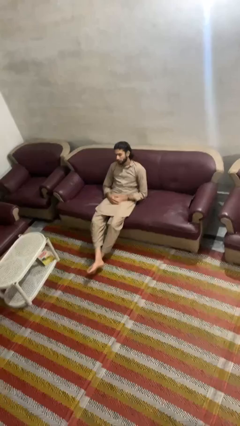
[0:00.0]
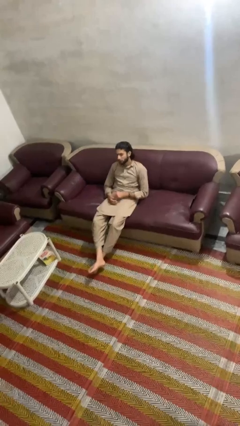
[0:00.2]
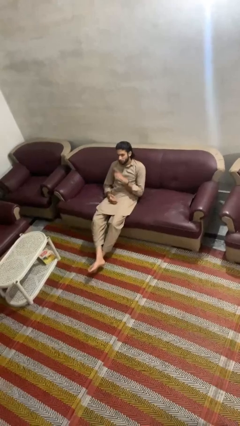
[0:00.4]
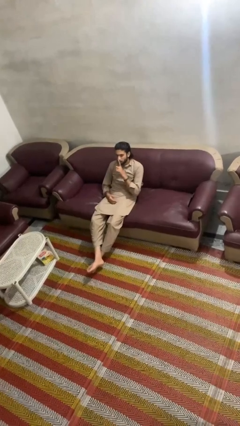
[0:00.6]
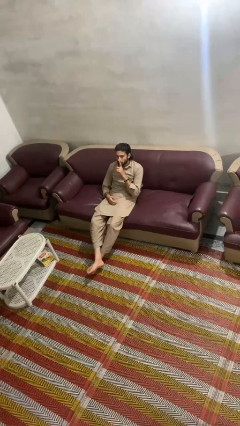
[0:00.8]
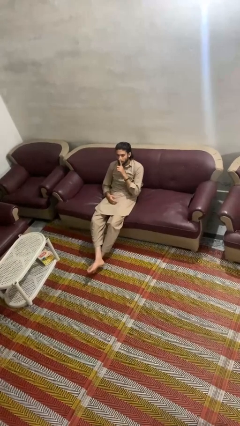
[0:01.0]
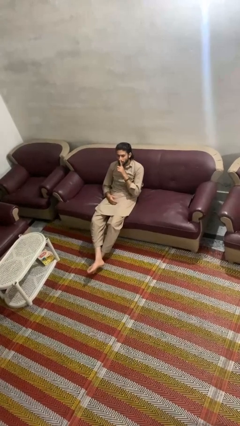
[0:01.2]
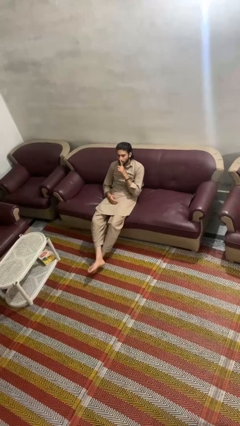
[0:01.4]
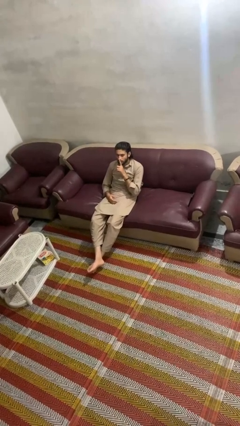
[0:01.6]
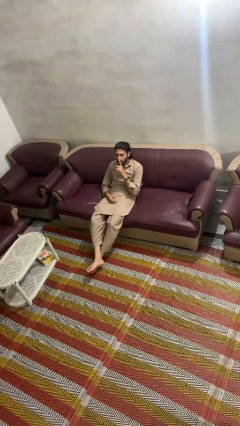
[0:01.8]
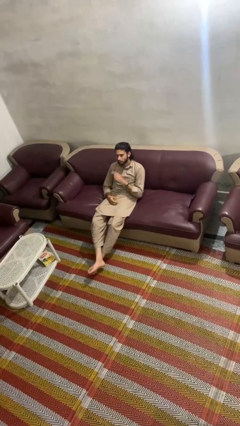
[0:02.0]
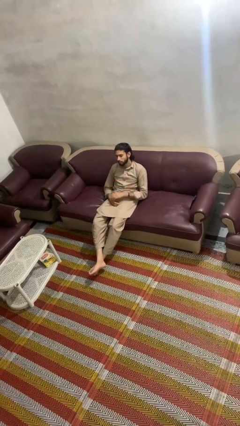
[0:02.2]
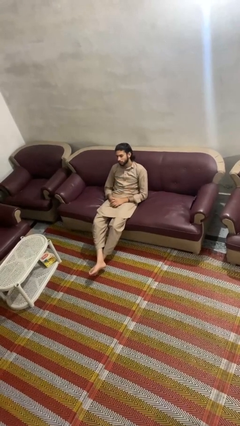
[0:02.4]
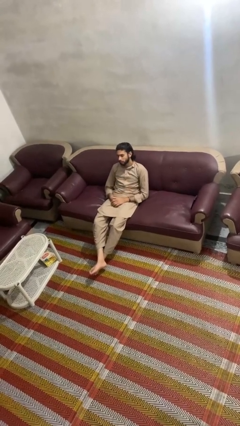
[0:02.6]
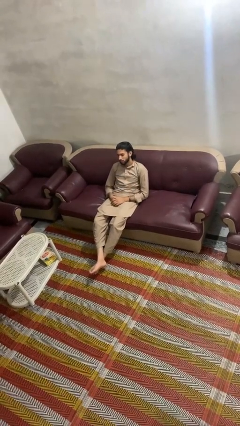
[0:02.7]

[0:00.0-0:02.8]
person gestures be quiet

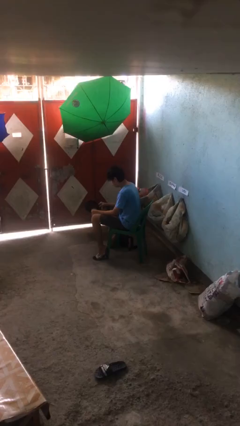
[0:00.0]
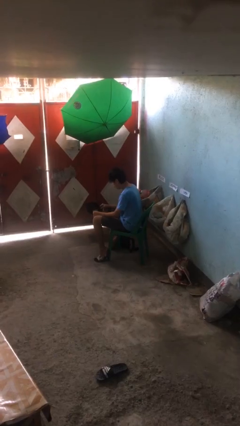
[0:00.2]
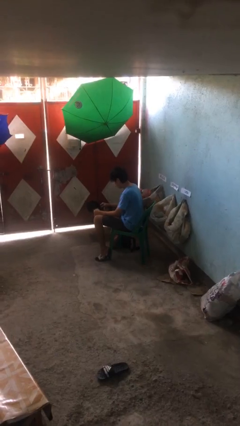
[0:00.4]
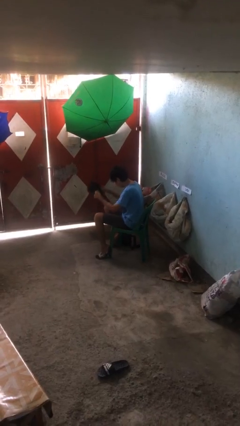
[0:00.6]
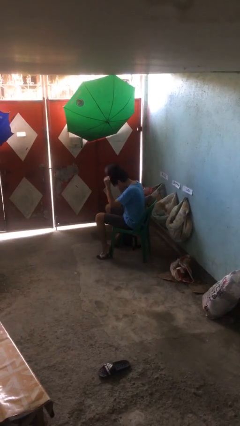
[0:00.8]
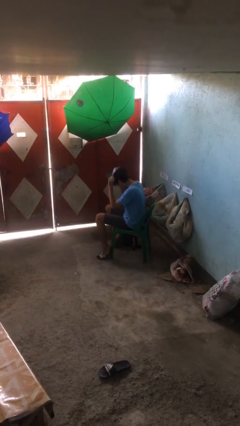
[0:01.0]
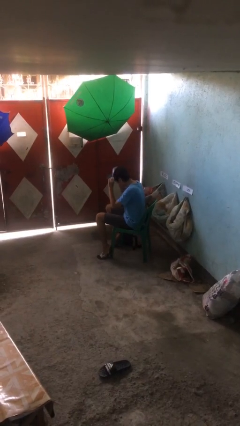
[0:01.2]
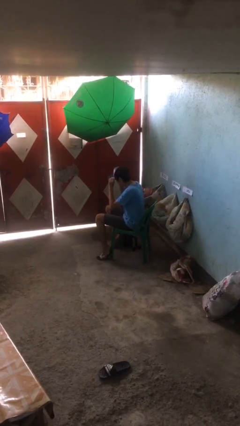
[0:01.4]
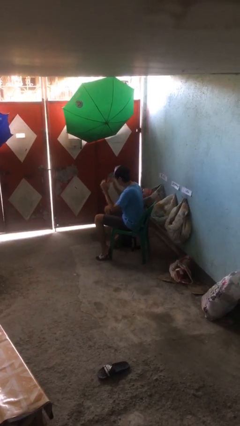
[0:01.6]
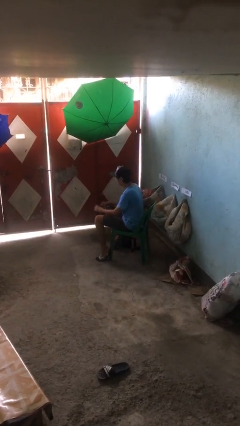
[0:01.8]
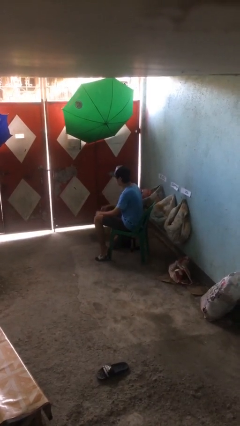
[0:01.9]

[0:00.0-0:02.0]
person puts on hat

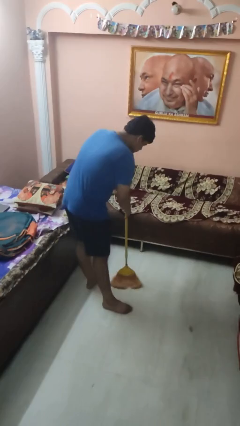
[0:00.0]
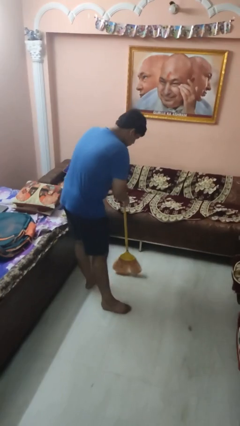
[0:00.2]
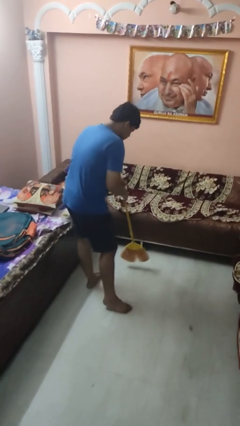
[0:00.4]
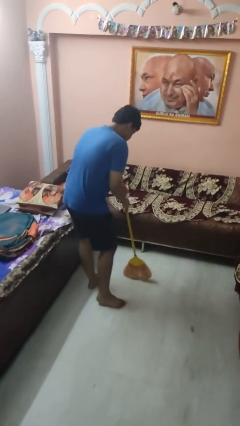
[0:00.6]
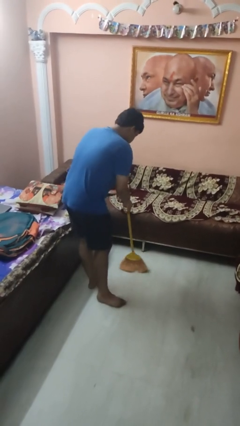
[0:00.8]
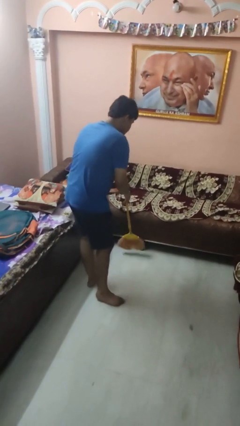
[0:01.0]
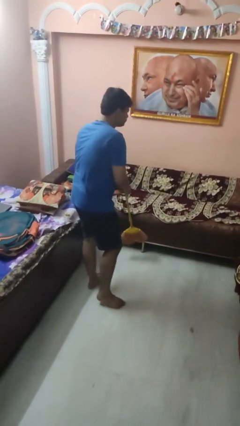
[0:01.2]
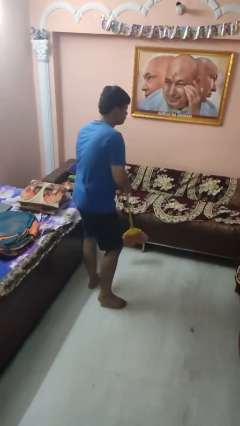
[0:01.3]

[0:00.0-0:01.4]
person sweeps floor

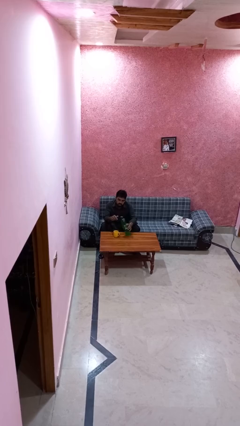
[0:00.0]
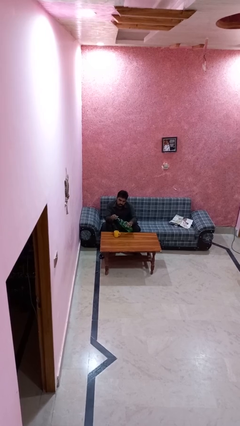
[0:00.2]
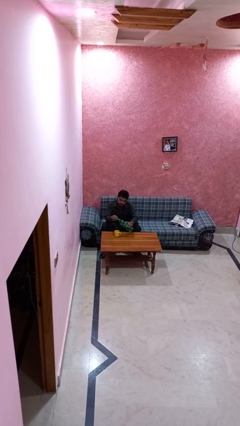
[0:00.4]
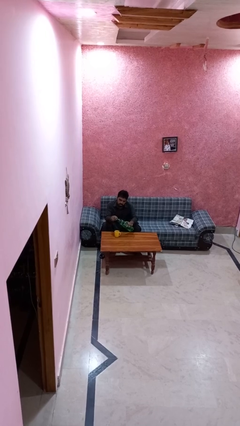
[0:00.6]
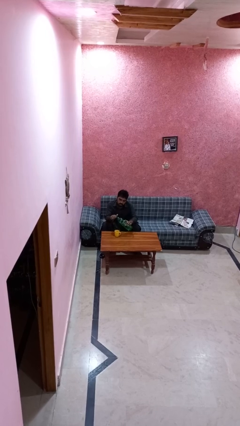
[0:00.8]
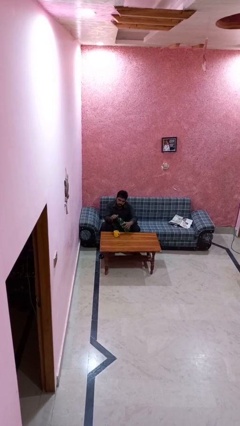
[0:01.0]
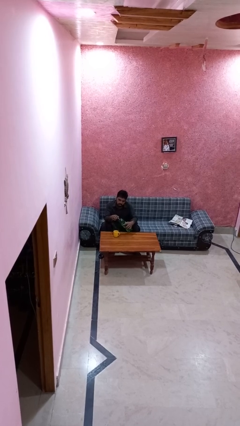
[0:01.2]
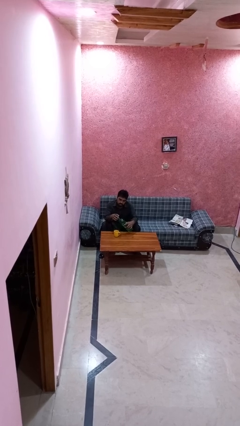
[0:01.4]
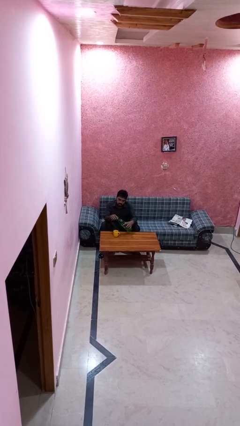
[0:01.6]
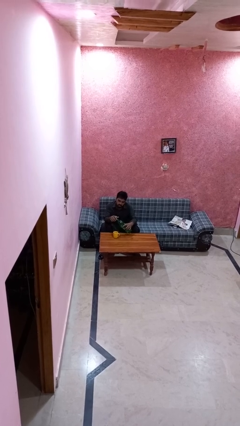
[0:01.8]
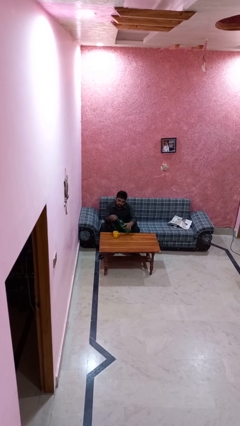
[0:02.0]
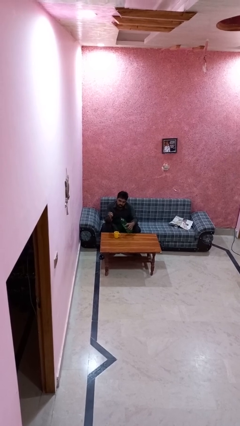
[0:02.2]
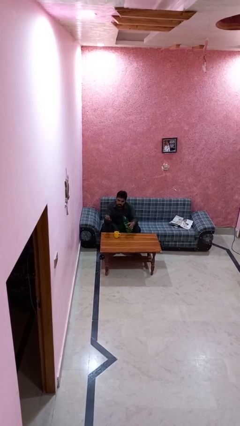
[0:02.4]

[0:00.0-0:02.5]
person unscrews lid from bottle

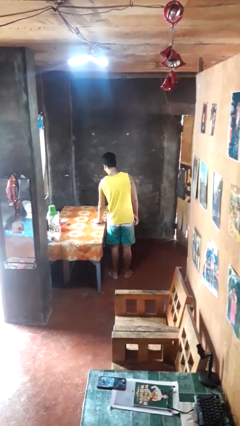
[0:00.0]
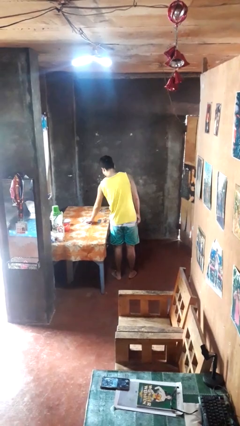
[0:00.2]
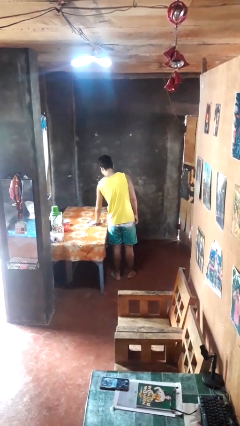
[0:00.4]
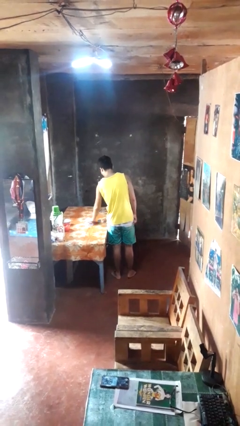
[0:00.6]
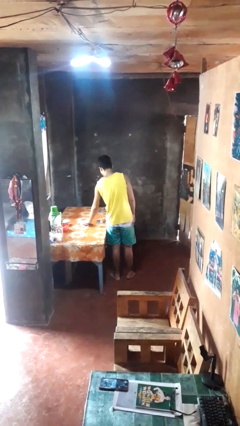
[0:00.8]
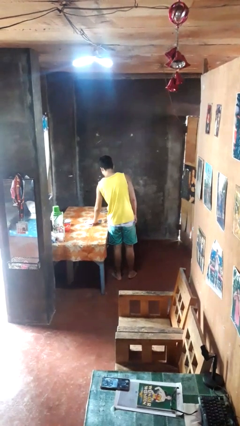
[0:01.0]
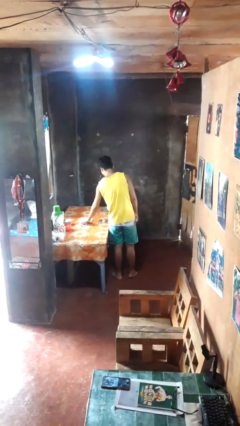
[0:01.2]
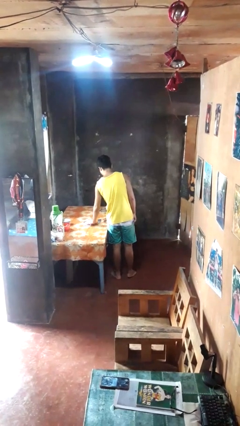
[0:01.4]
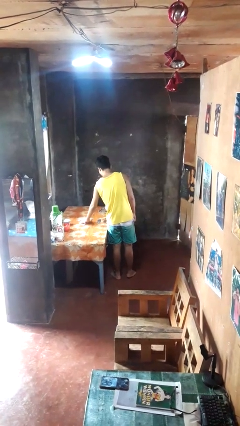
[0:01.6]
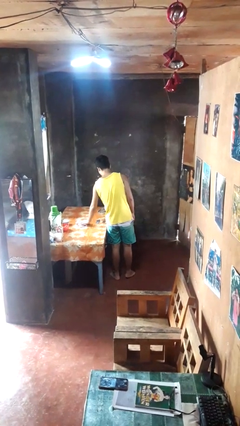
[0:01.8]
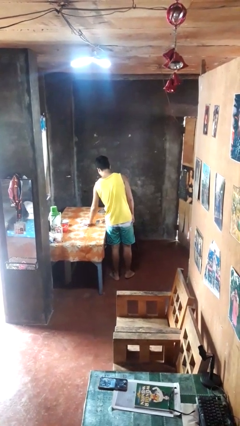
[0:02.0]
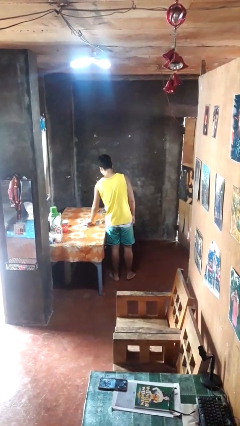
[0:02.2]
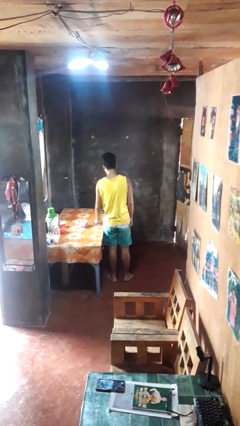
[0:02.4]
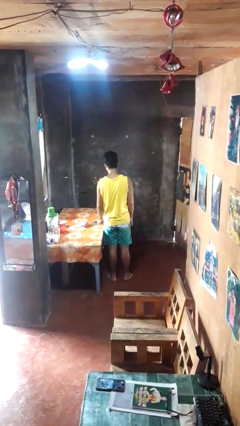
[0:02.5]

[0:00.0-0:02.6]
person cleans table with rag

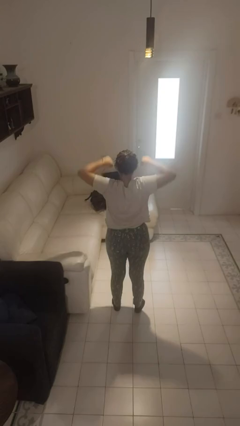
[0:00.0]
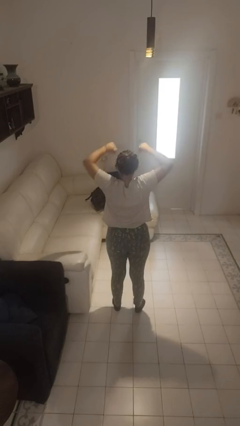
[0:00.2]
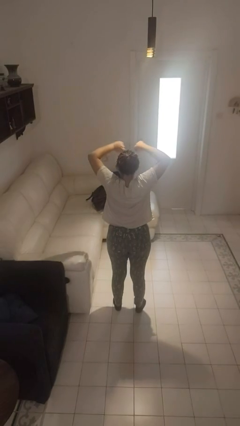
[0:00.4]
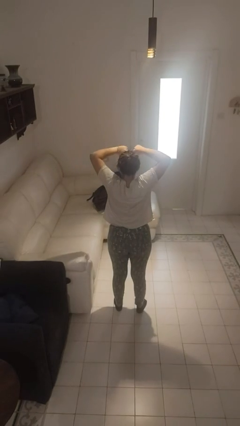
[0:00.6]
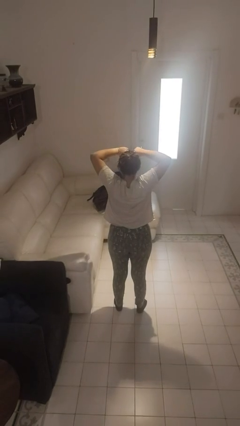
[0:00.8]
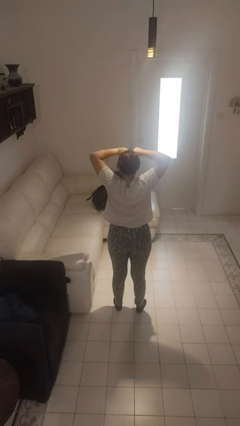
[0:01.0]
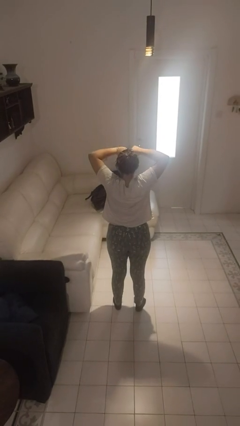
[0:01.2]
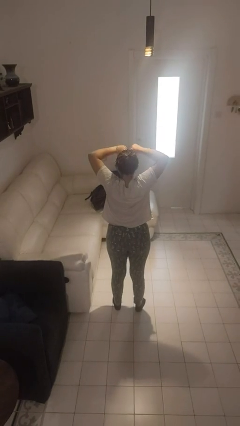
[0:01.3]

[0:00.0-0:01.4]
person stretches arms to side

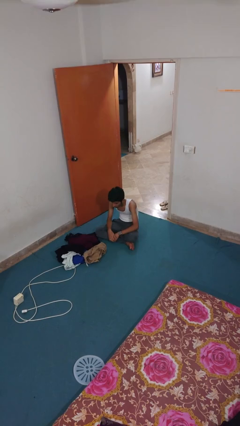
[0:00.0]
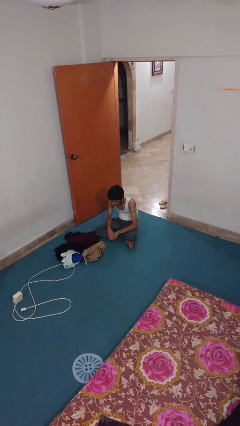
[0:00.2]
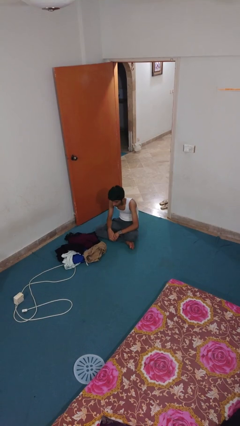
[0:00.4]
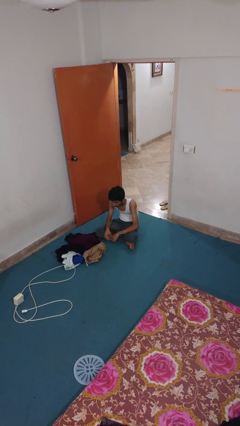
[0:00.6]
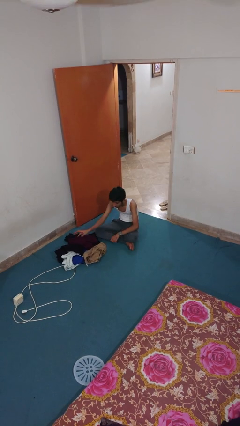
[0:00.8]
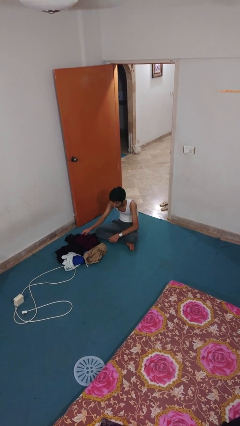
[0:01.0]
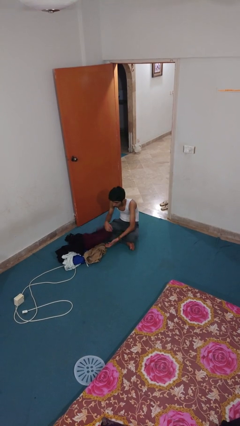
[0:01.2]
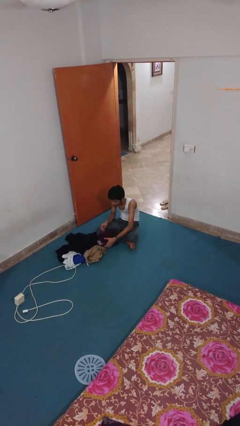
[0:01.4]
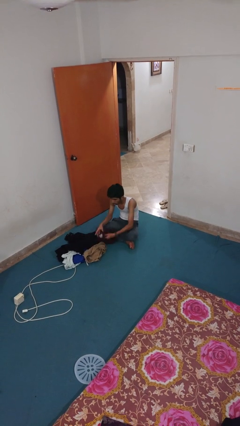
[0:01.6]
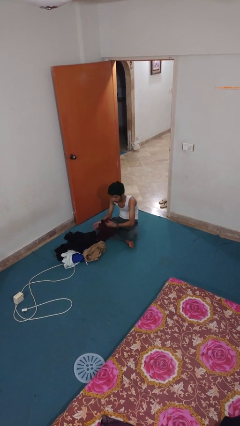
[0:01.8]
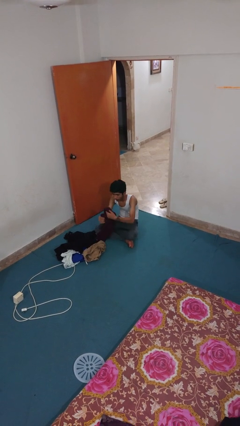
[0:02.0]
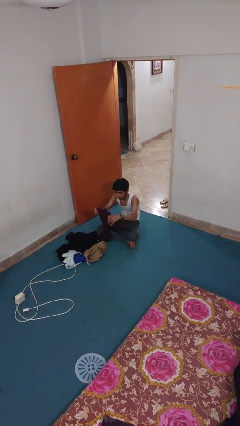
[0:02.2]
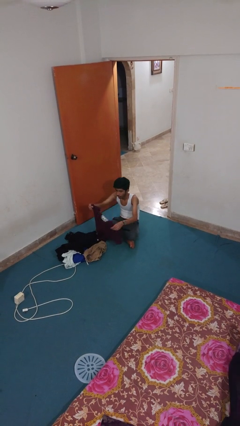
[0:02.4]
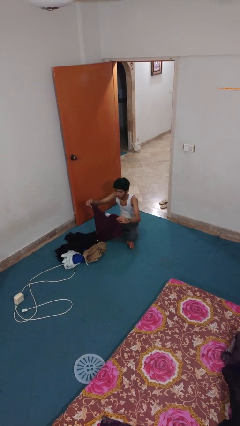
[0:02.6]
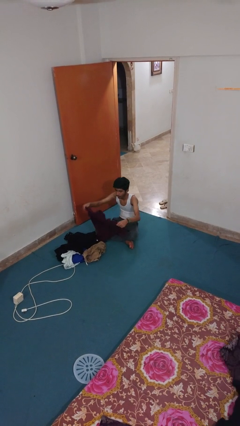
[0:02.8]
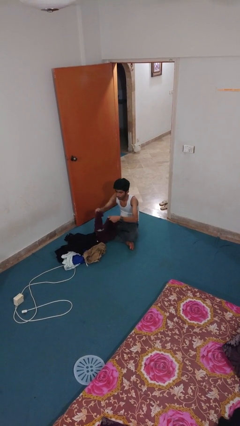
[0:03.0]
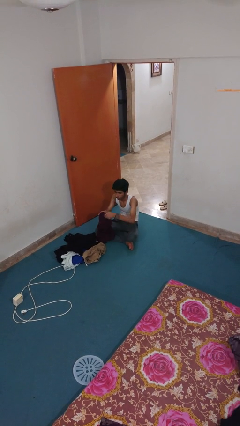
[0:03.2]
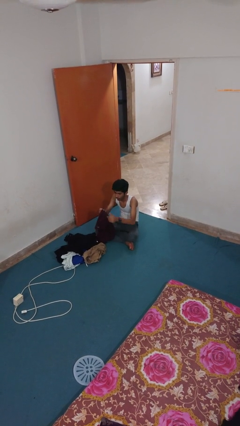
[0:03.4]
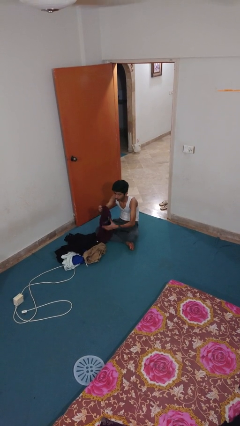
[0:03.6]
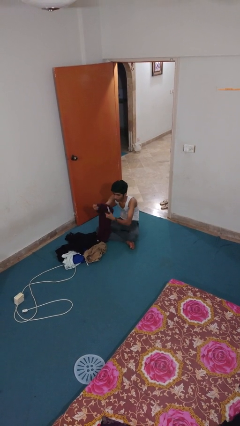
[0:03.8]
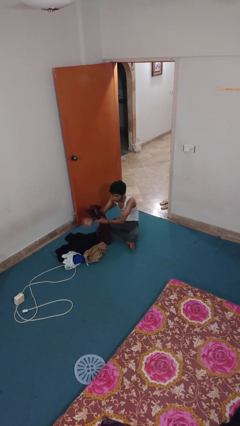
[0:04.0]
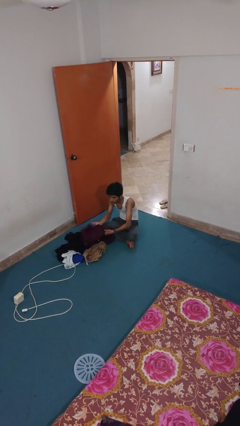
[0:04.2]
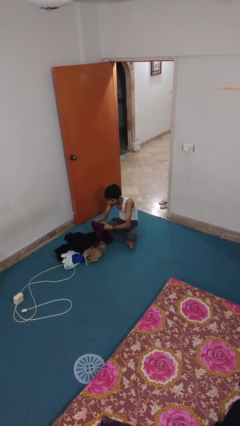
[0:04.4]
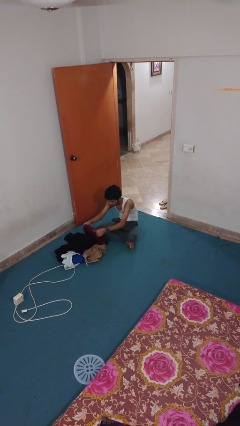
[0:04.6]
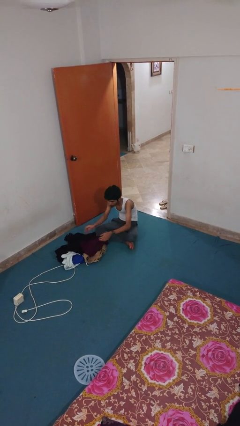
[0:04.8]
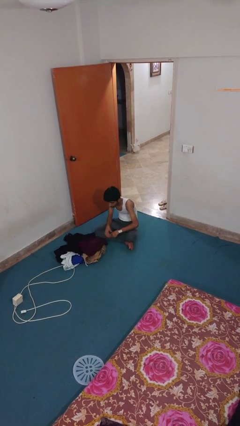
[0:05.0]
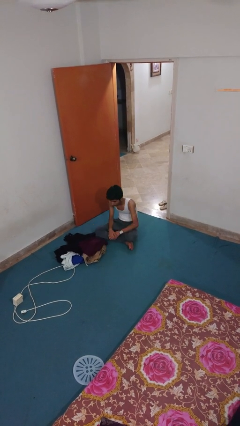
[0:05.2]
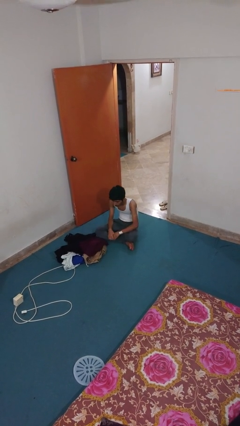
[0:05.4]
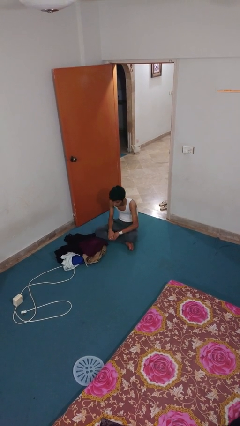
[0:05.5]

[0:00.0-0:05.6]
person folds shirt
